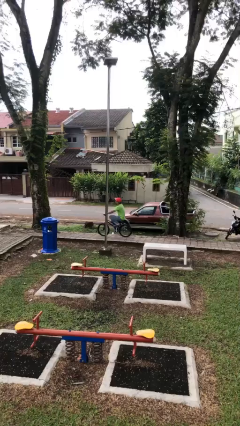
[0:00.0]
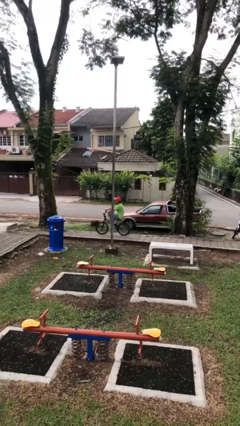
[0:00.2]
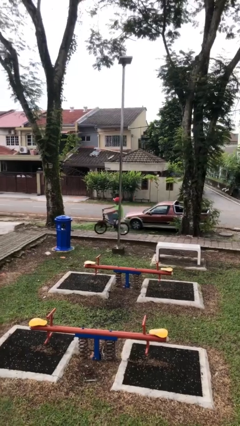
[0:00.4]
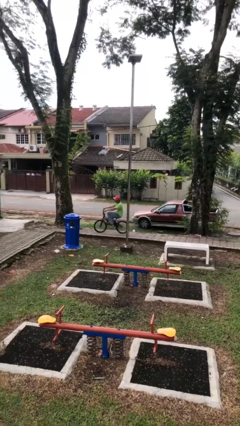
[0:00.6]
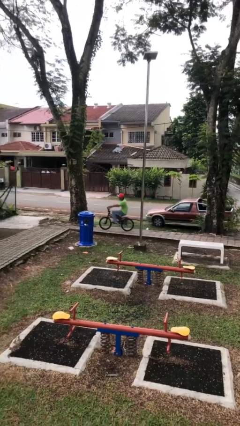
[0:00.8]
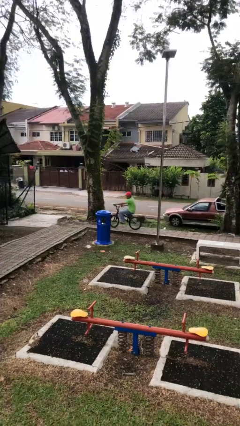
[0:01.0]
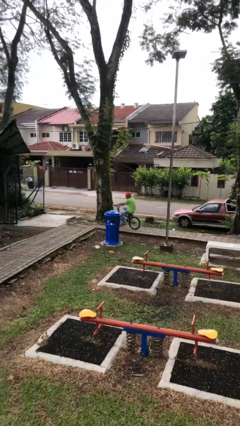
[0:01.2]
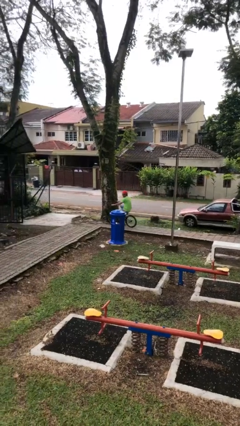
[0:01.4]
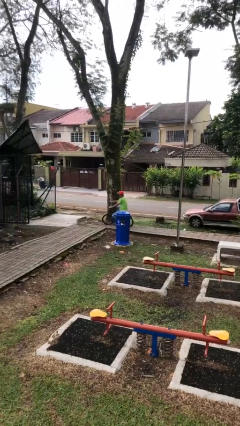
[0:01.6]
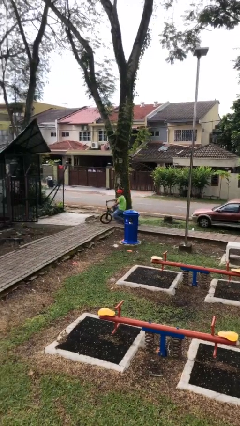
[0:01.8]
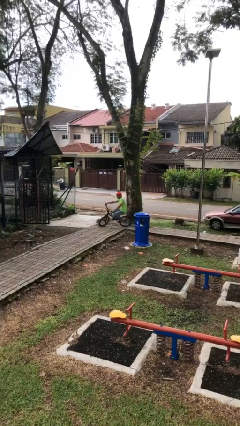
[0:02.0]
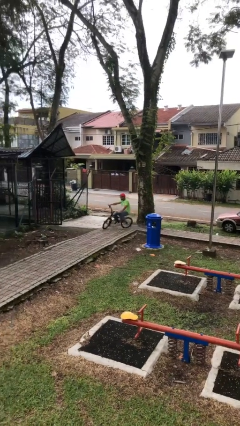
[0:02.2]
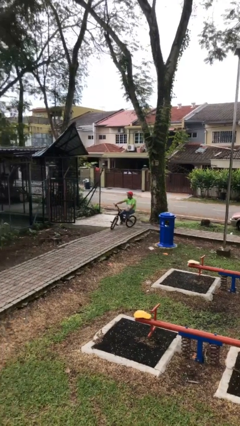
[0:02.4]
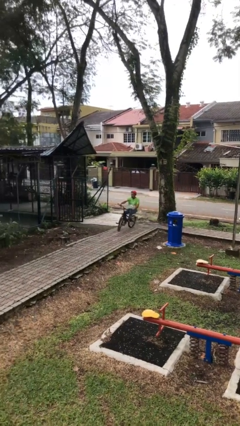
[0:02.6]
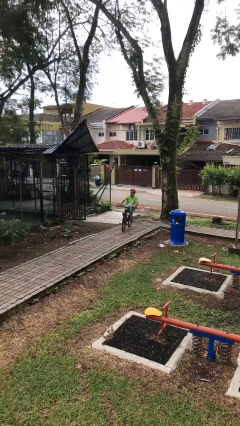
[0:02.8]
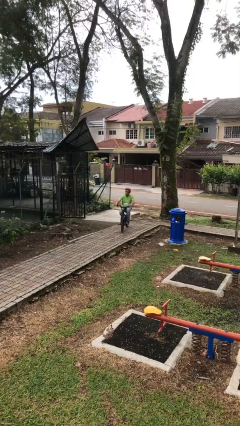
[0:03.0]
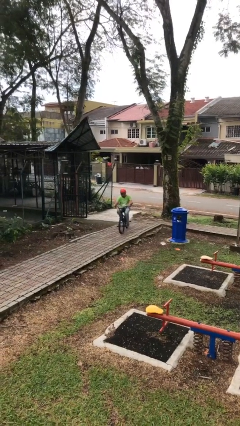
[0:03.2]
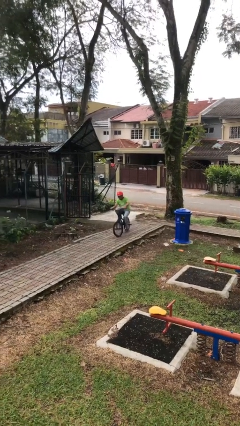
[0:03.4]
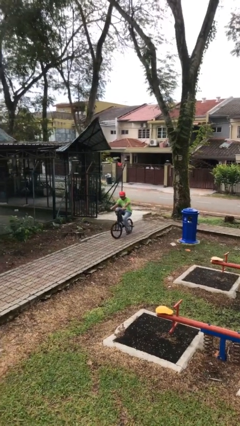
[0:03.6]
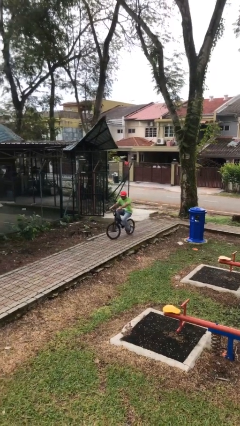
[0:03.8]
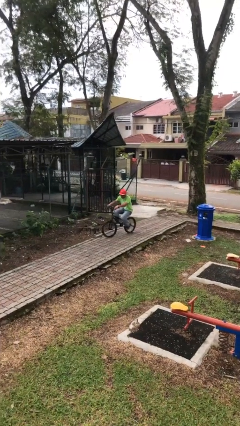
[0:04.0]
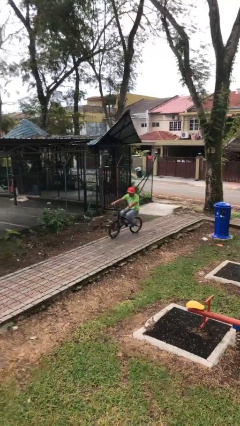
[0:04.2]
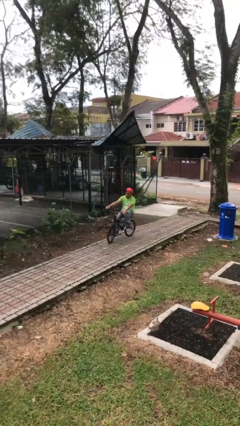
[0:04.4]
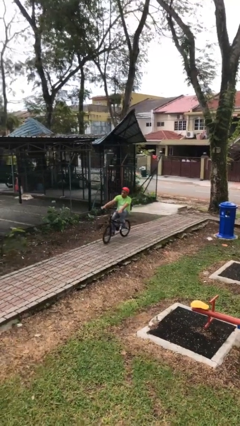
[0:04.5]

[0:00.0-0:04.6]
person rides bicycle

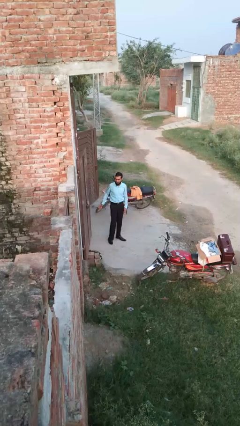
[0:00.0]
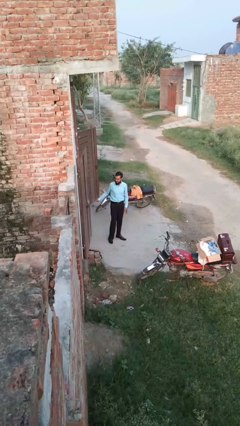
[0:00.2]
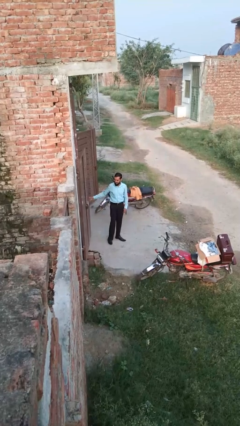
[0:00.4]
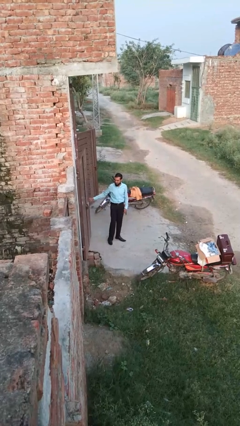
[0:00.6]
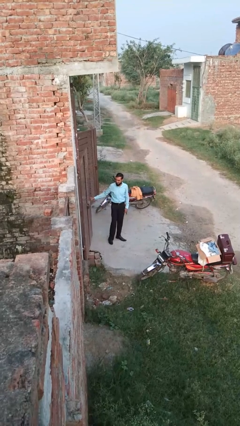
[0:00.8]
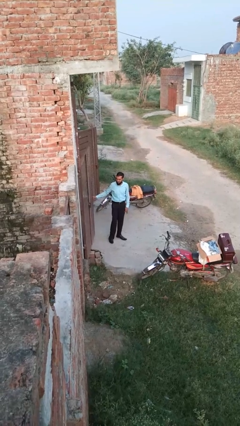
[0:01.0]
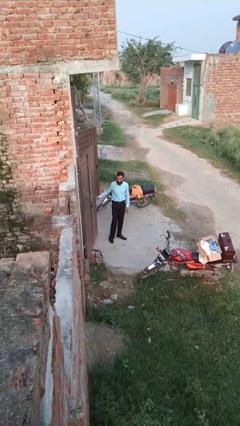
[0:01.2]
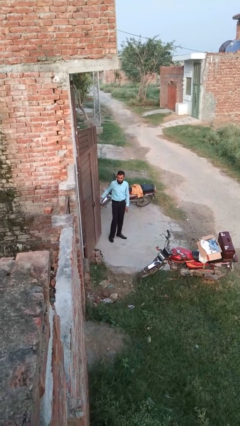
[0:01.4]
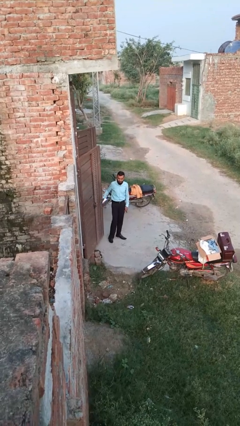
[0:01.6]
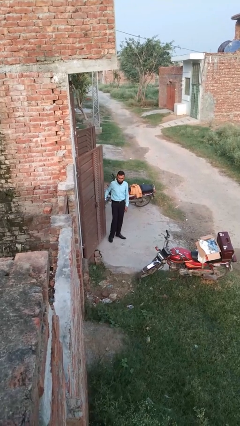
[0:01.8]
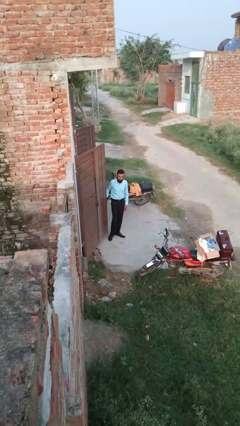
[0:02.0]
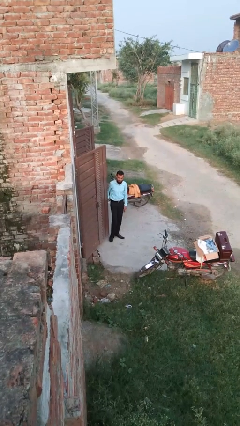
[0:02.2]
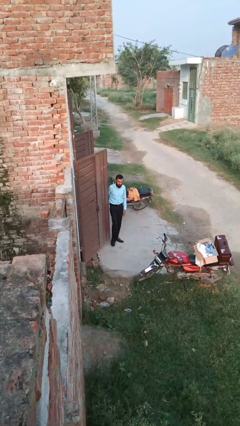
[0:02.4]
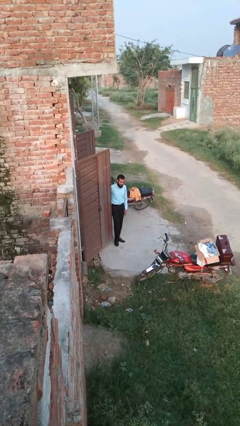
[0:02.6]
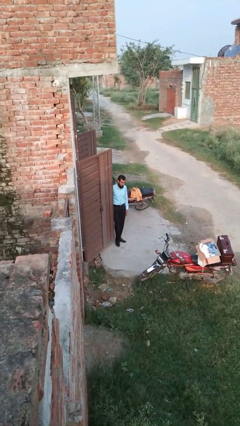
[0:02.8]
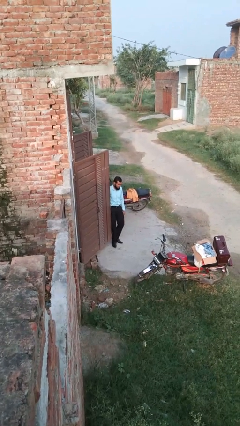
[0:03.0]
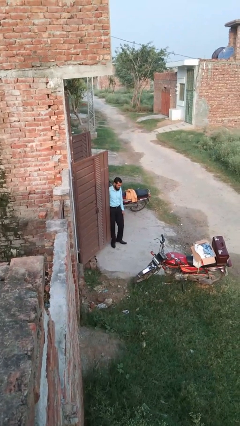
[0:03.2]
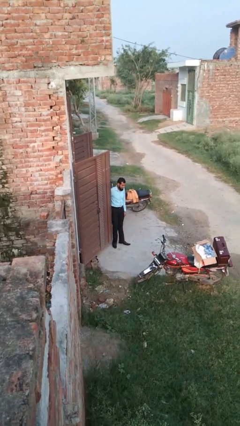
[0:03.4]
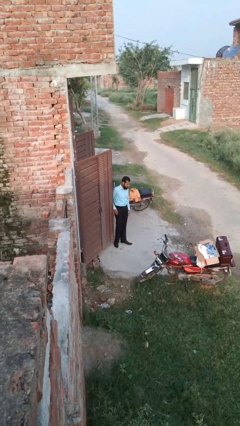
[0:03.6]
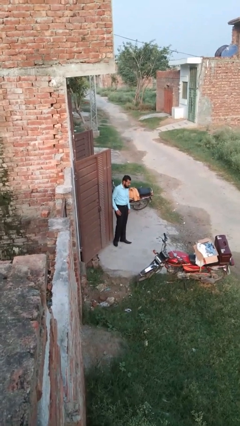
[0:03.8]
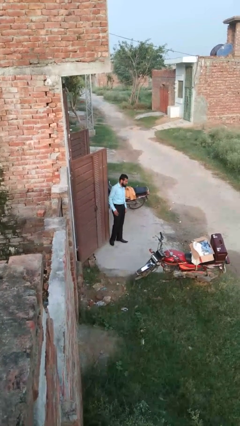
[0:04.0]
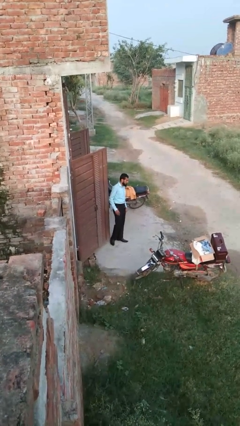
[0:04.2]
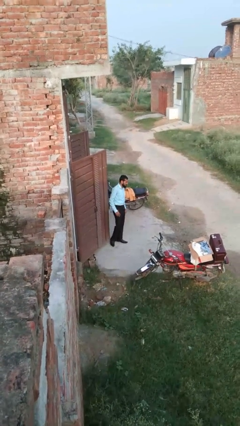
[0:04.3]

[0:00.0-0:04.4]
person opens facility door

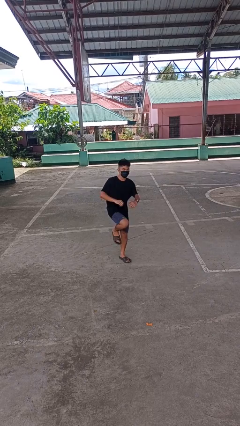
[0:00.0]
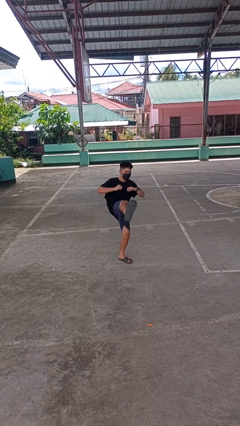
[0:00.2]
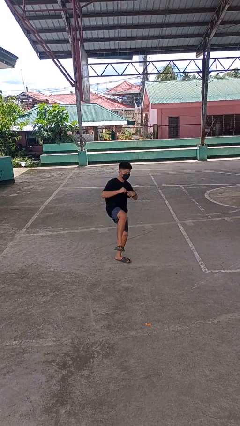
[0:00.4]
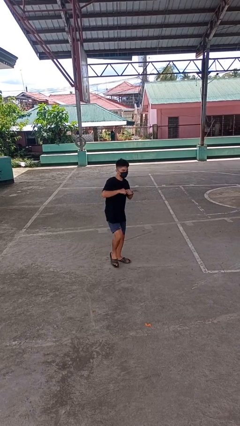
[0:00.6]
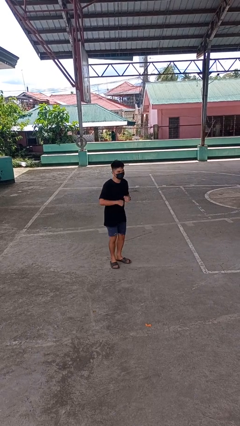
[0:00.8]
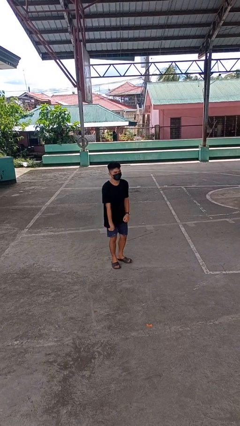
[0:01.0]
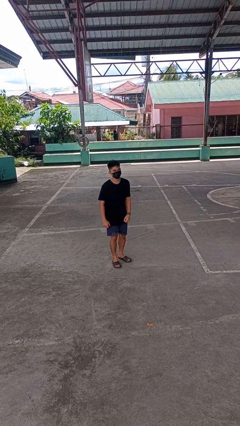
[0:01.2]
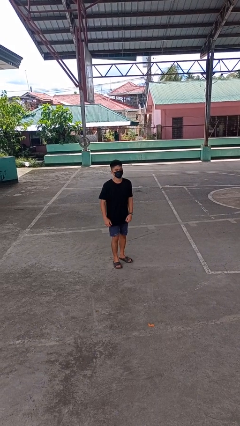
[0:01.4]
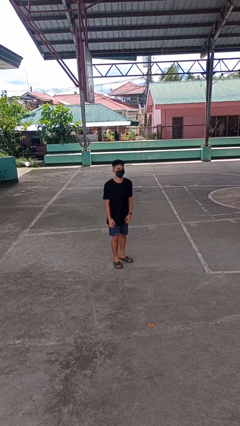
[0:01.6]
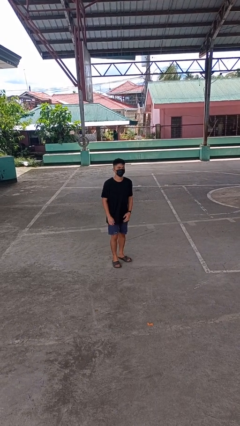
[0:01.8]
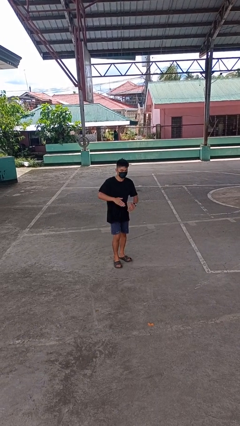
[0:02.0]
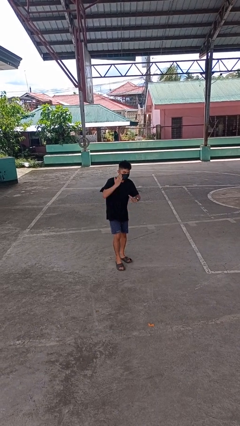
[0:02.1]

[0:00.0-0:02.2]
person karate kicks

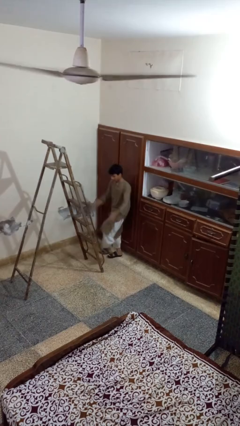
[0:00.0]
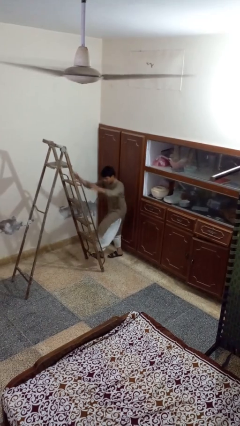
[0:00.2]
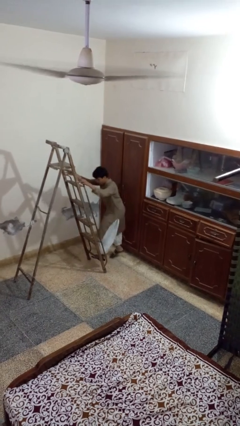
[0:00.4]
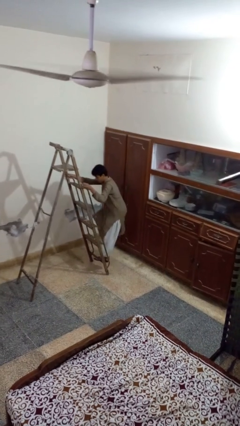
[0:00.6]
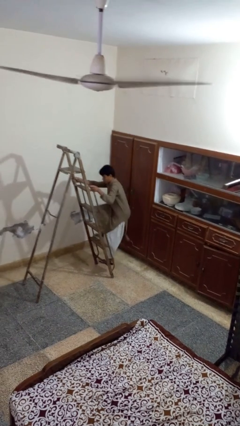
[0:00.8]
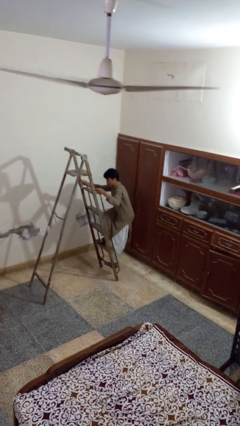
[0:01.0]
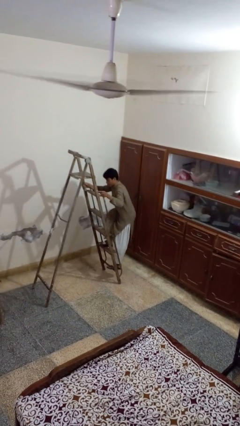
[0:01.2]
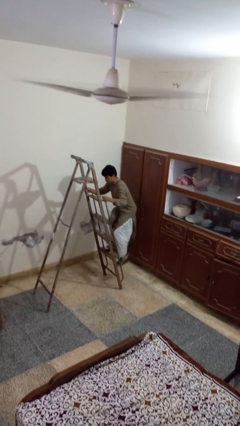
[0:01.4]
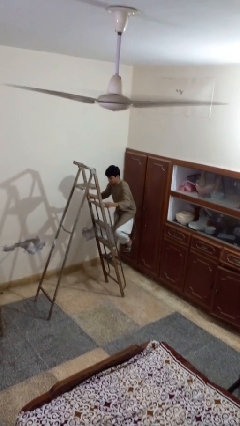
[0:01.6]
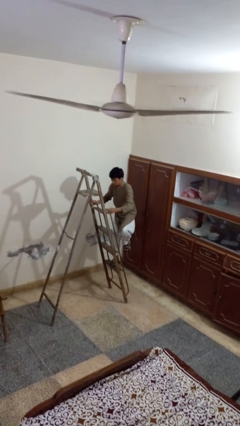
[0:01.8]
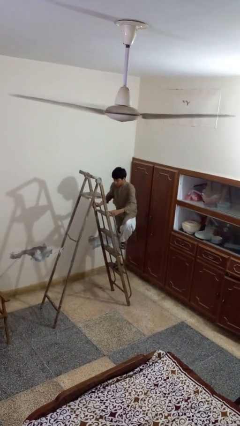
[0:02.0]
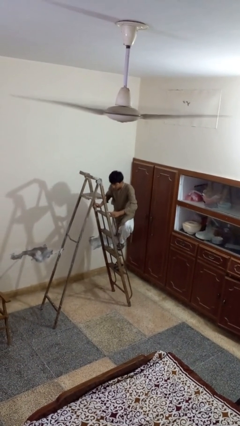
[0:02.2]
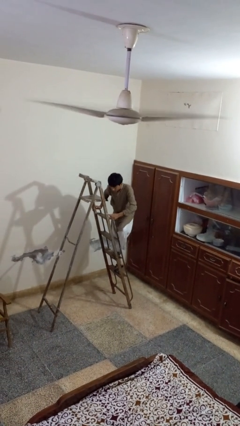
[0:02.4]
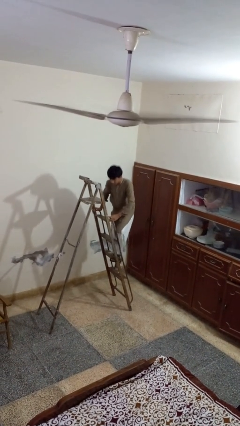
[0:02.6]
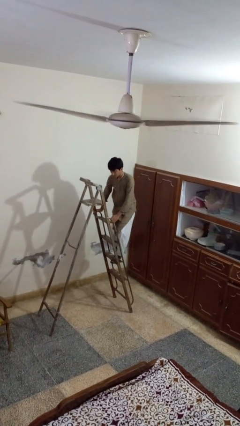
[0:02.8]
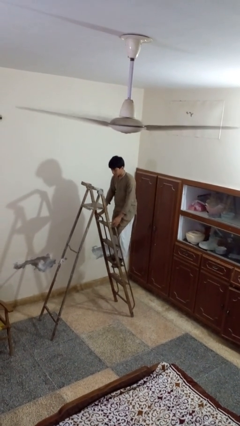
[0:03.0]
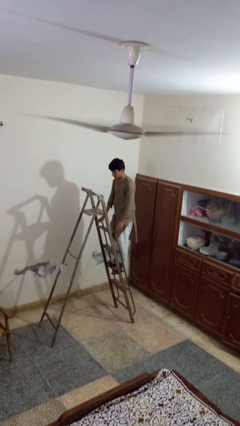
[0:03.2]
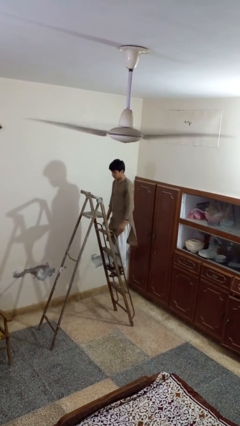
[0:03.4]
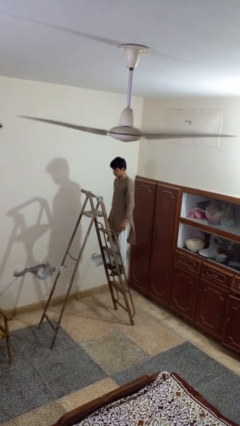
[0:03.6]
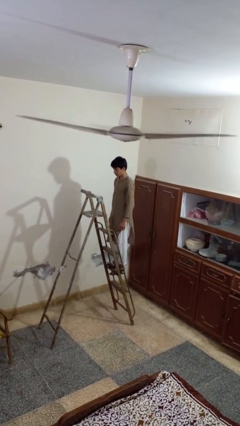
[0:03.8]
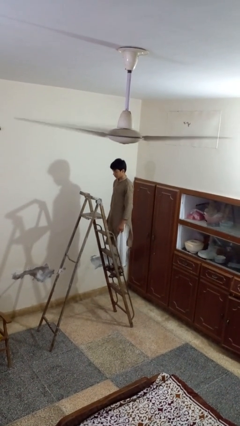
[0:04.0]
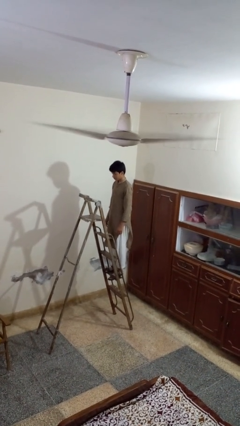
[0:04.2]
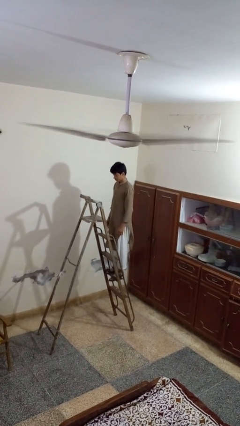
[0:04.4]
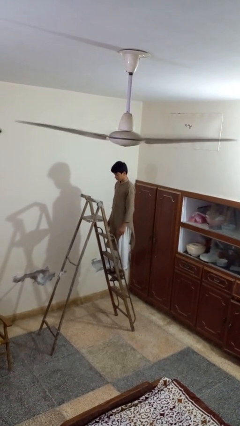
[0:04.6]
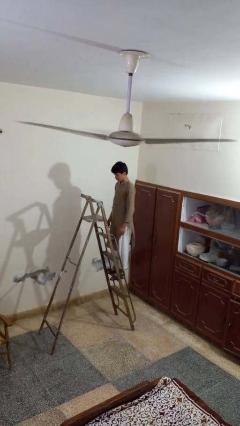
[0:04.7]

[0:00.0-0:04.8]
person climbs up ladder

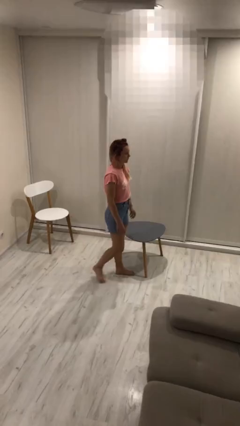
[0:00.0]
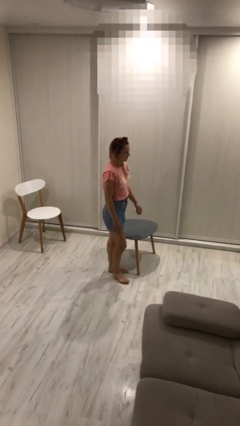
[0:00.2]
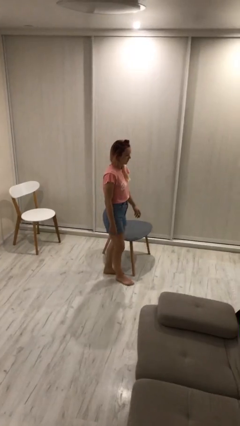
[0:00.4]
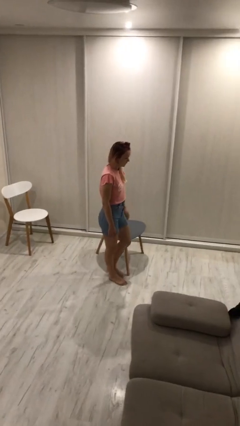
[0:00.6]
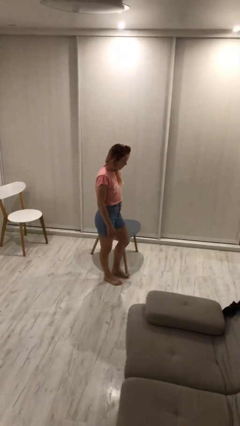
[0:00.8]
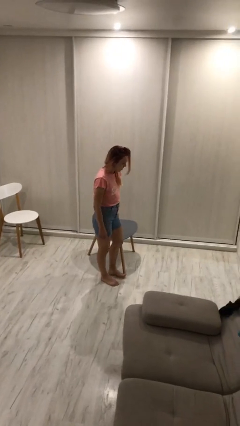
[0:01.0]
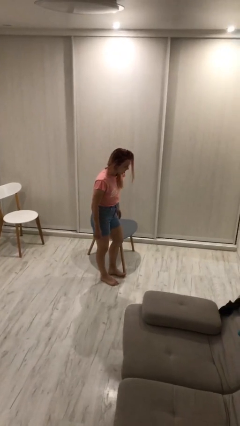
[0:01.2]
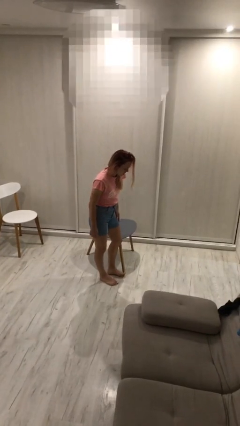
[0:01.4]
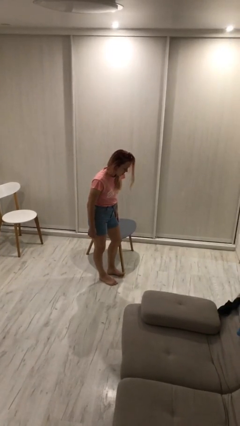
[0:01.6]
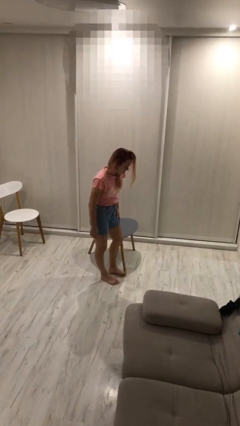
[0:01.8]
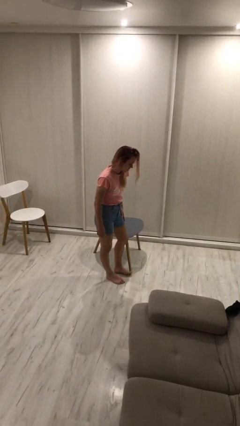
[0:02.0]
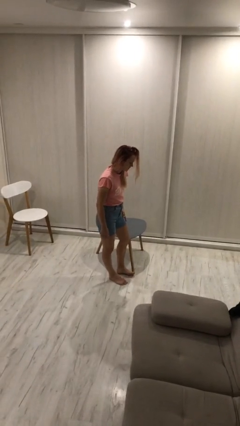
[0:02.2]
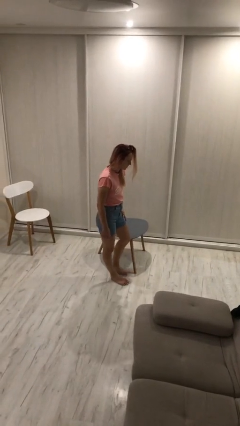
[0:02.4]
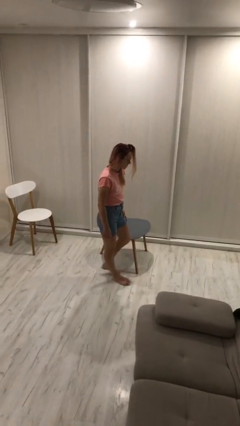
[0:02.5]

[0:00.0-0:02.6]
person stubs toe
